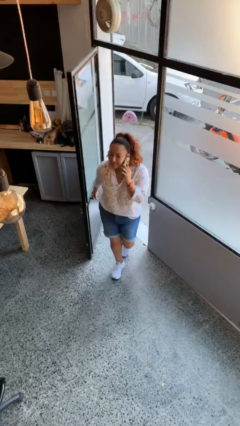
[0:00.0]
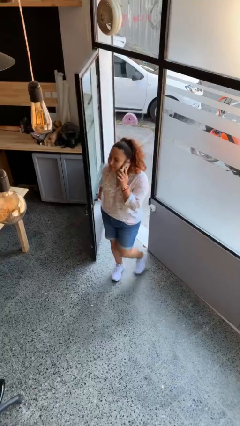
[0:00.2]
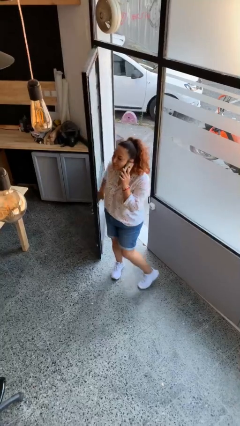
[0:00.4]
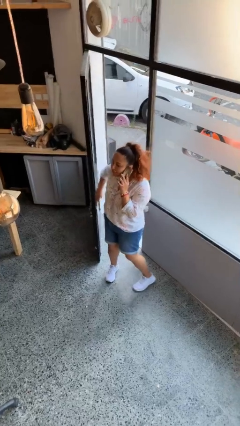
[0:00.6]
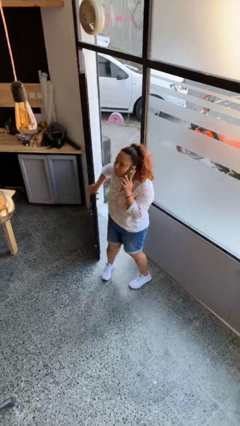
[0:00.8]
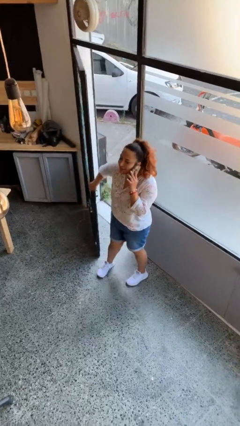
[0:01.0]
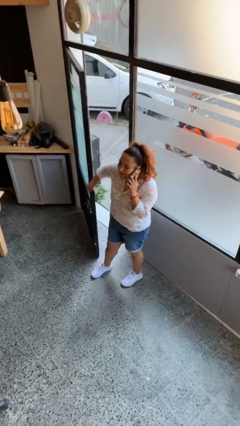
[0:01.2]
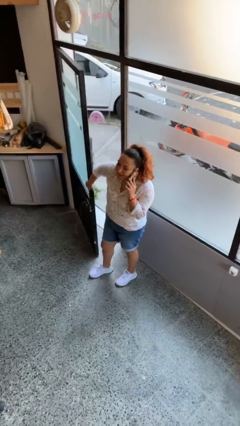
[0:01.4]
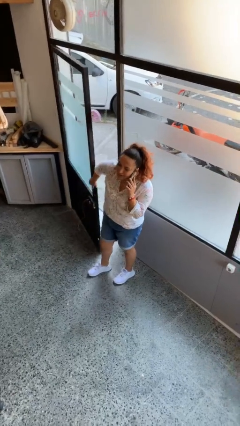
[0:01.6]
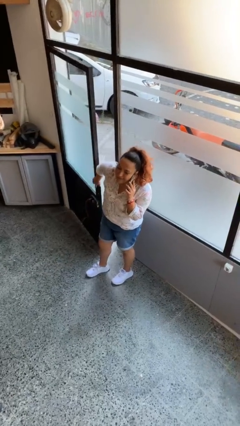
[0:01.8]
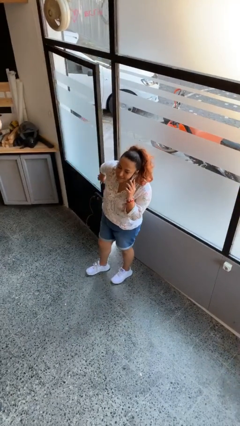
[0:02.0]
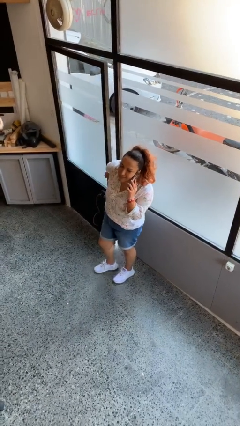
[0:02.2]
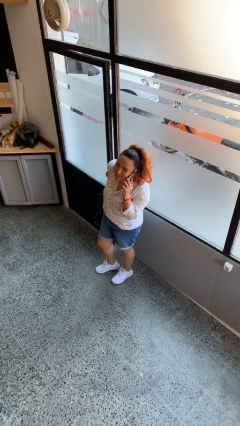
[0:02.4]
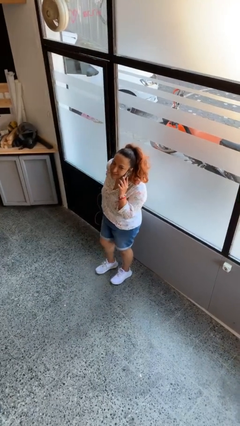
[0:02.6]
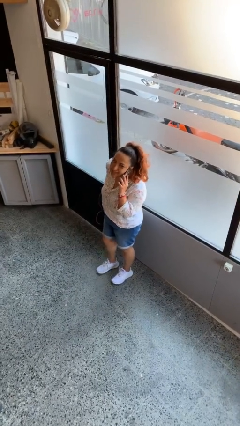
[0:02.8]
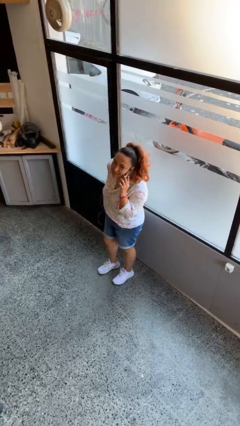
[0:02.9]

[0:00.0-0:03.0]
person closes facility door

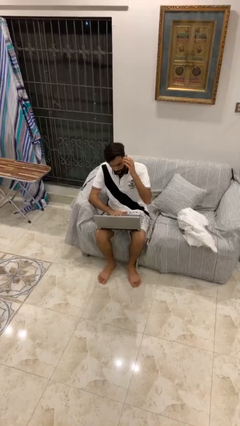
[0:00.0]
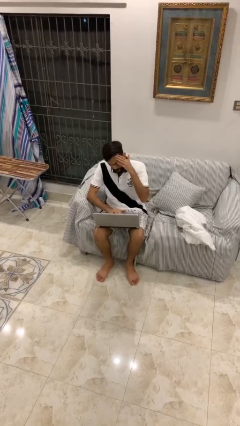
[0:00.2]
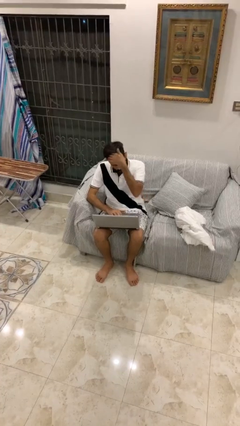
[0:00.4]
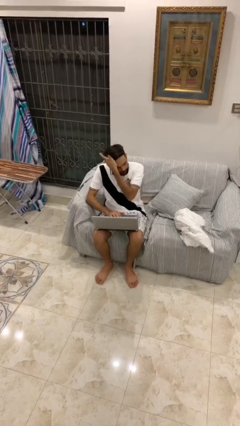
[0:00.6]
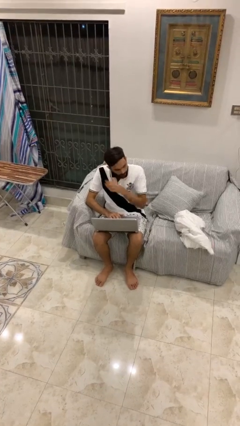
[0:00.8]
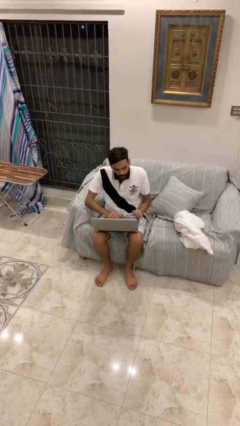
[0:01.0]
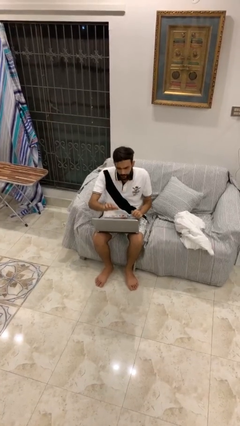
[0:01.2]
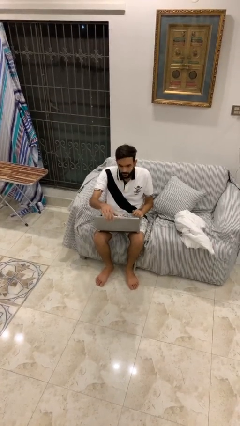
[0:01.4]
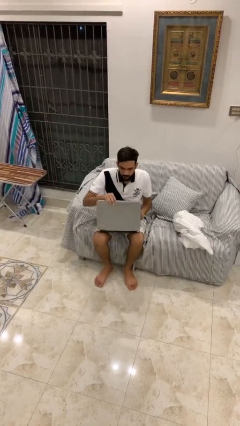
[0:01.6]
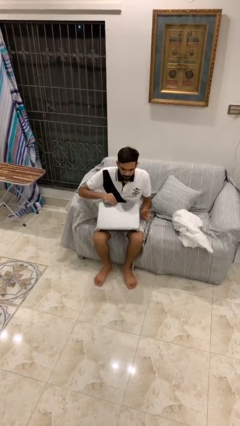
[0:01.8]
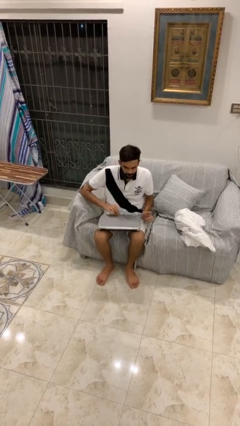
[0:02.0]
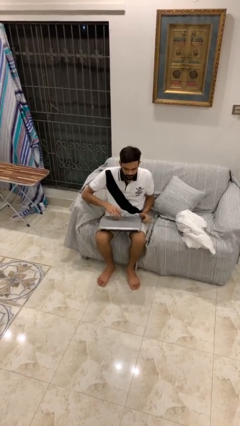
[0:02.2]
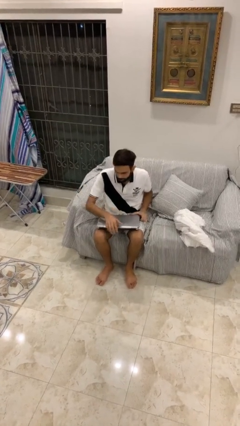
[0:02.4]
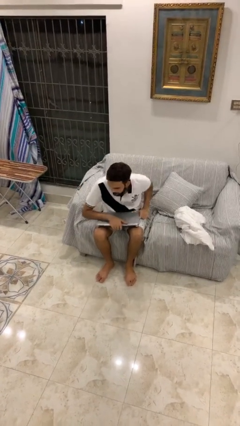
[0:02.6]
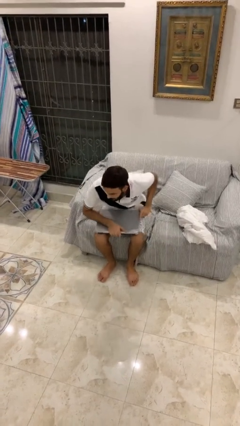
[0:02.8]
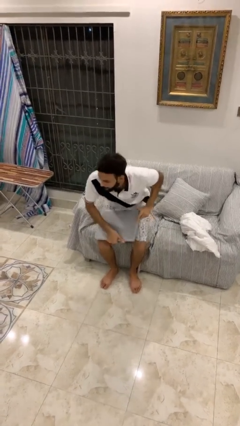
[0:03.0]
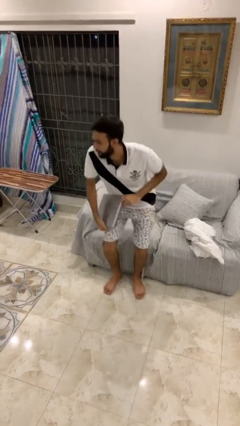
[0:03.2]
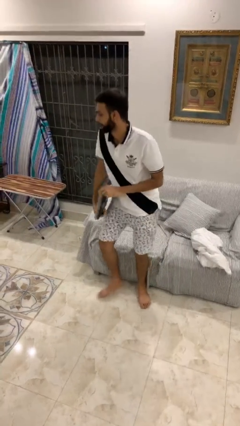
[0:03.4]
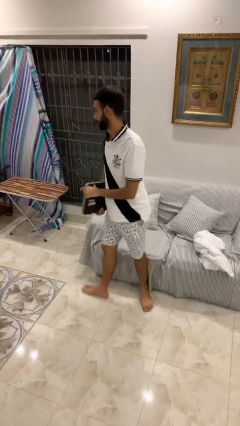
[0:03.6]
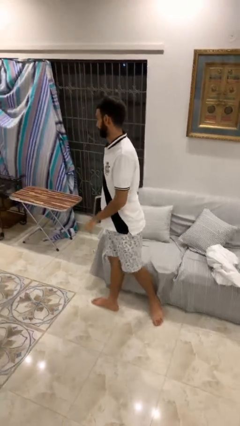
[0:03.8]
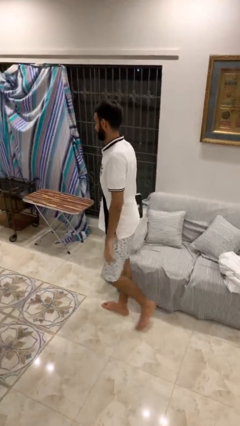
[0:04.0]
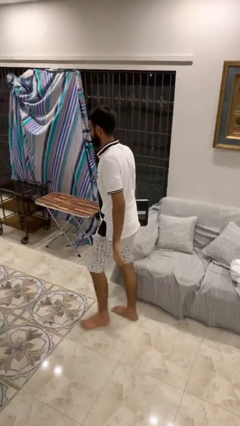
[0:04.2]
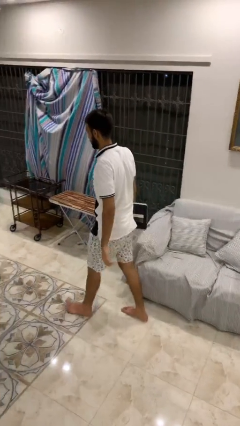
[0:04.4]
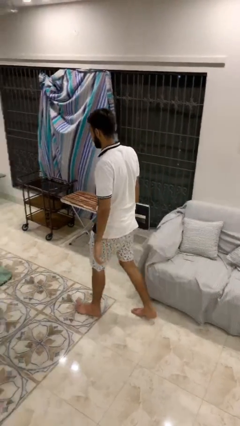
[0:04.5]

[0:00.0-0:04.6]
person stands up

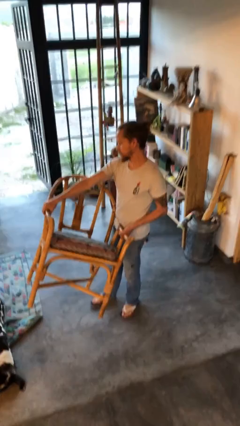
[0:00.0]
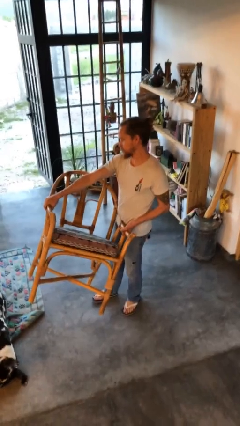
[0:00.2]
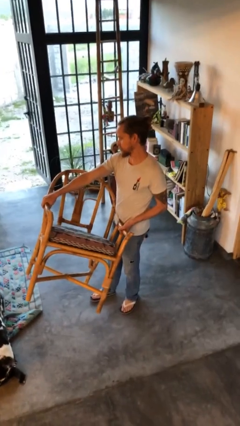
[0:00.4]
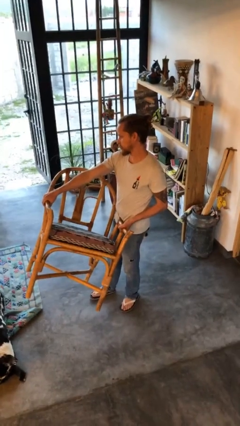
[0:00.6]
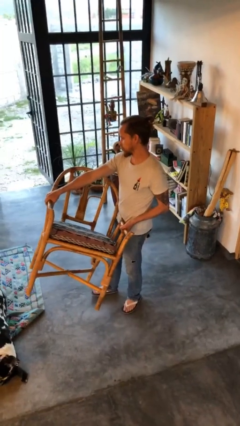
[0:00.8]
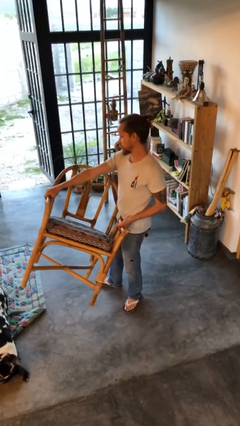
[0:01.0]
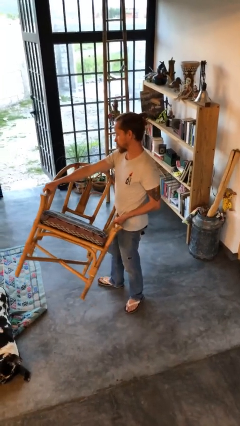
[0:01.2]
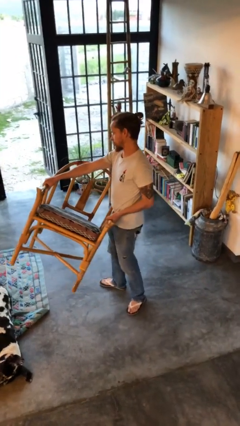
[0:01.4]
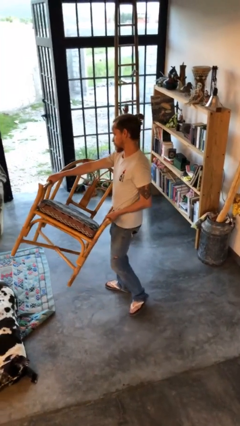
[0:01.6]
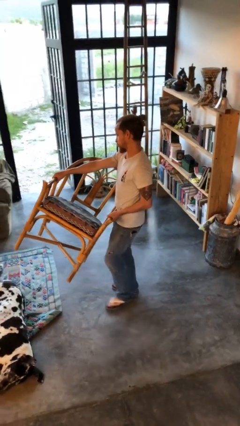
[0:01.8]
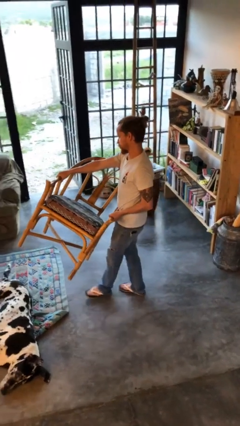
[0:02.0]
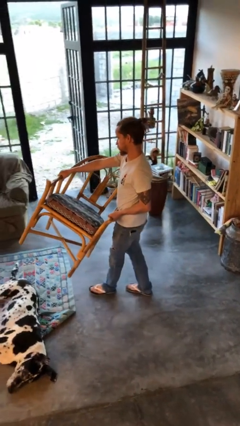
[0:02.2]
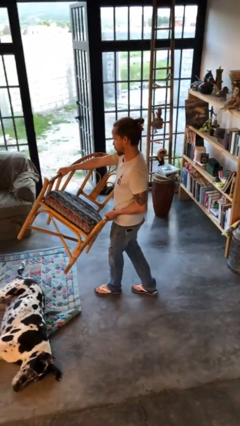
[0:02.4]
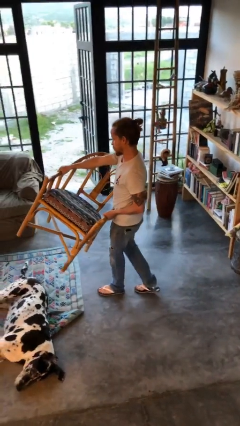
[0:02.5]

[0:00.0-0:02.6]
person carries furniture

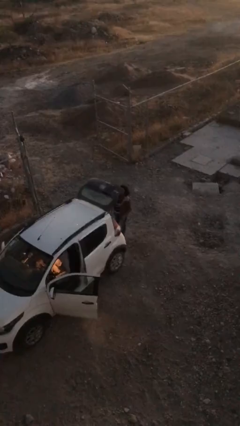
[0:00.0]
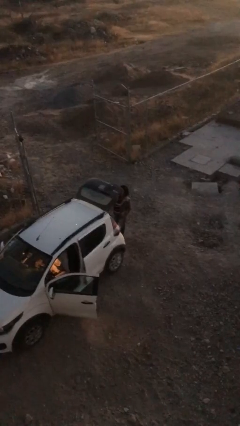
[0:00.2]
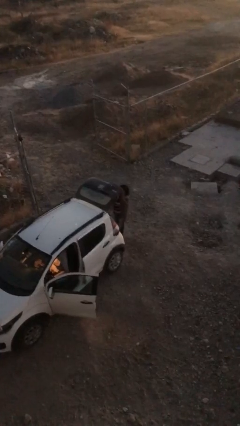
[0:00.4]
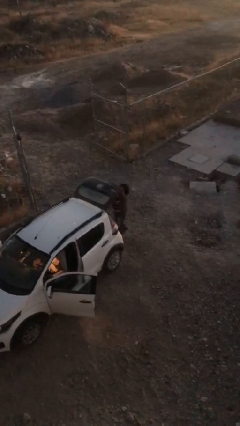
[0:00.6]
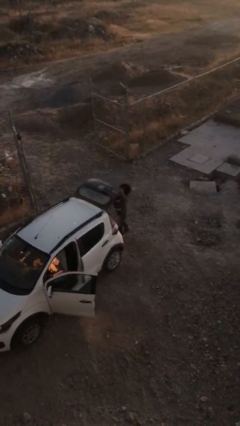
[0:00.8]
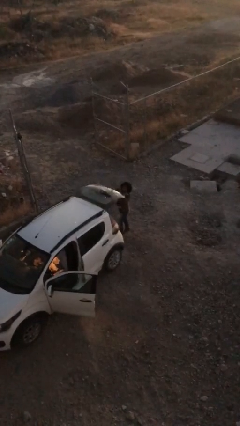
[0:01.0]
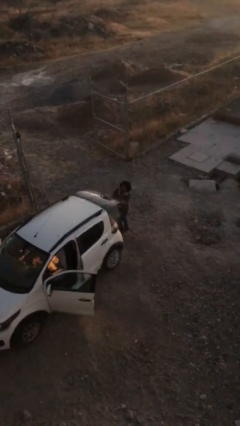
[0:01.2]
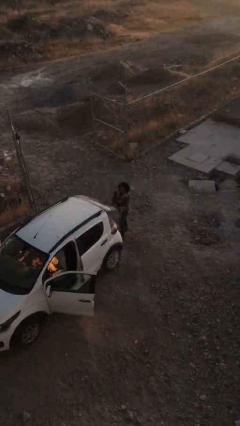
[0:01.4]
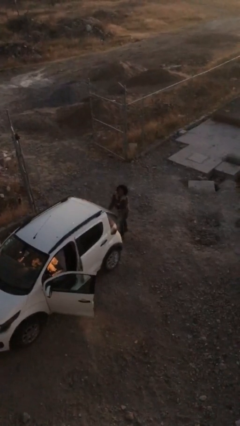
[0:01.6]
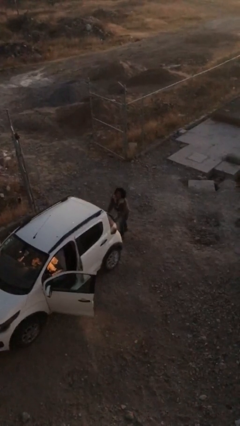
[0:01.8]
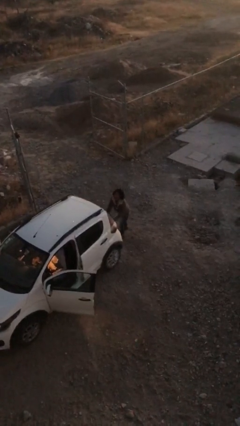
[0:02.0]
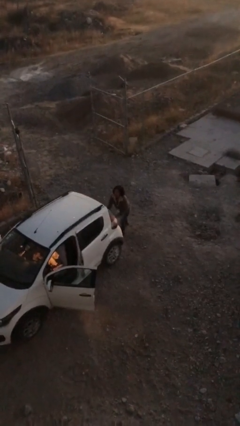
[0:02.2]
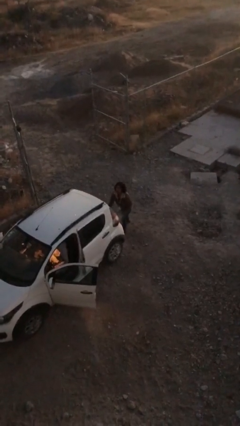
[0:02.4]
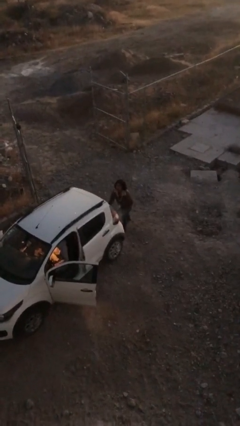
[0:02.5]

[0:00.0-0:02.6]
person closes car trunk

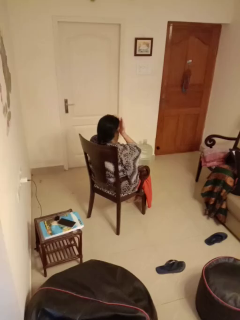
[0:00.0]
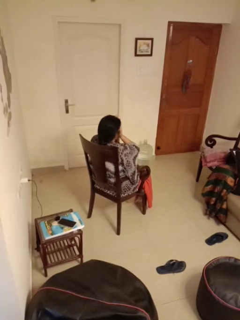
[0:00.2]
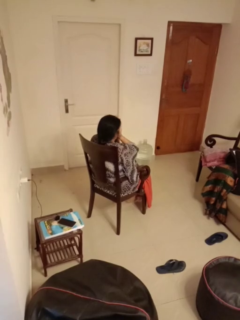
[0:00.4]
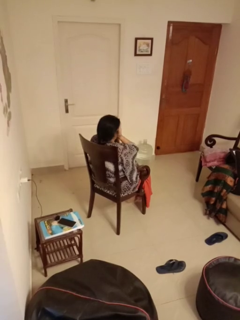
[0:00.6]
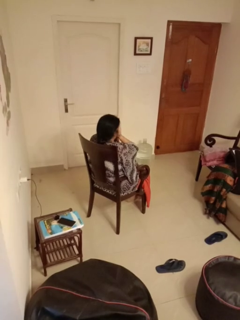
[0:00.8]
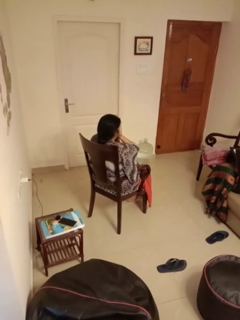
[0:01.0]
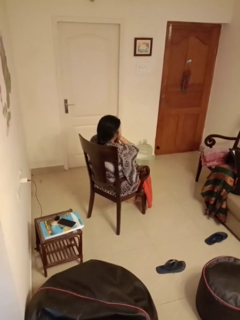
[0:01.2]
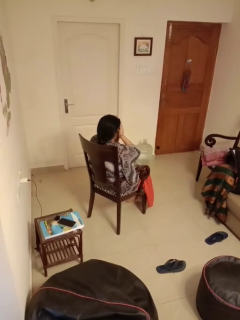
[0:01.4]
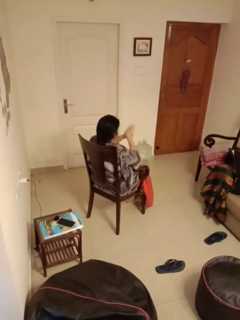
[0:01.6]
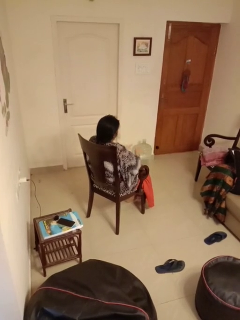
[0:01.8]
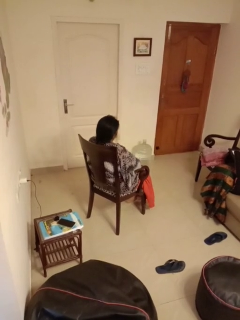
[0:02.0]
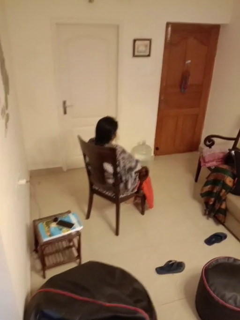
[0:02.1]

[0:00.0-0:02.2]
person covers face with hands

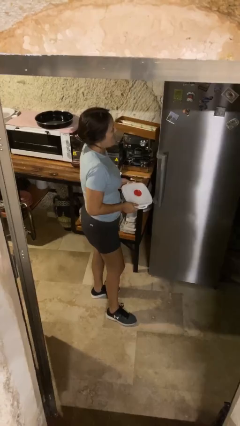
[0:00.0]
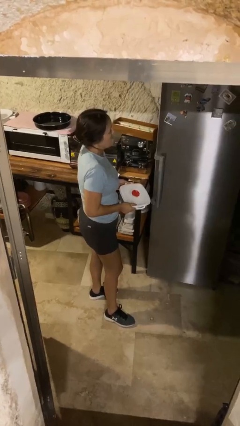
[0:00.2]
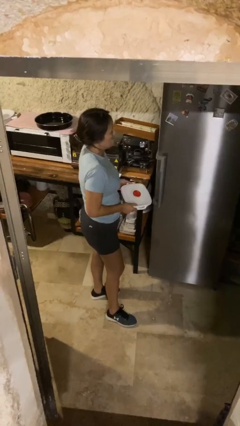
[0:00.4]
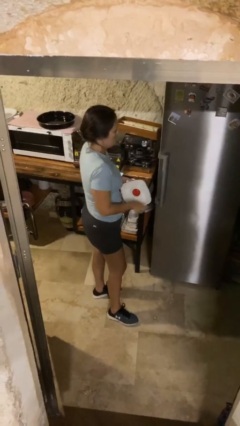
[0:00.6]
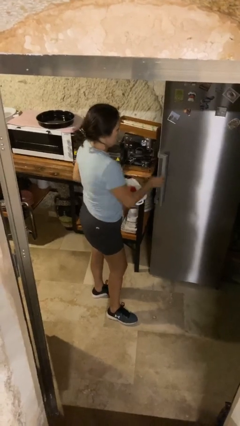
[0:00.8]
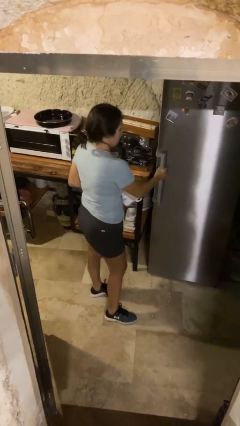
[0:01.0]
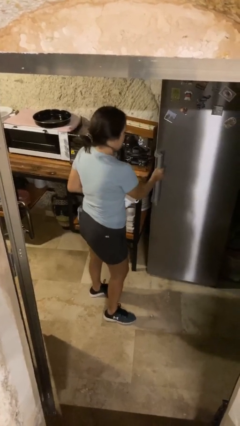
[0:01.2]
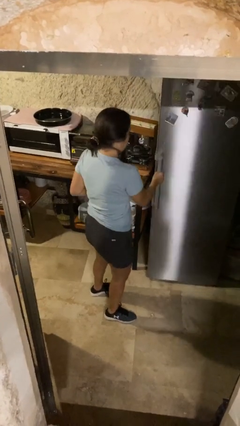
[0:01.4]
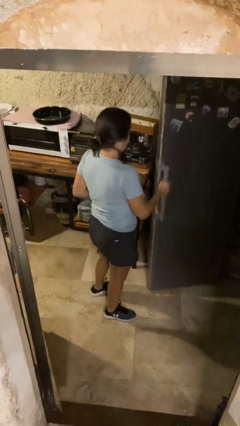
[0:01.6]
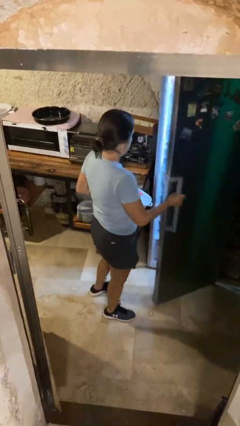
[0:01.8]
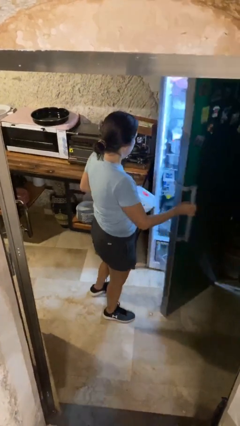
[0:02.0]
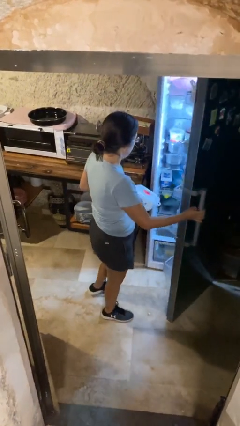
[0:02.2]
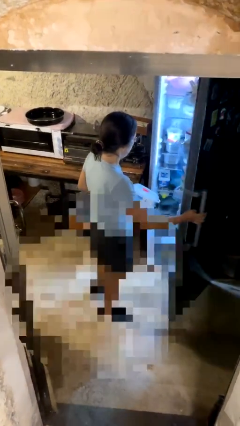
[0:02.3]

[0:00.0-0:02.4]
person opens refrigerator

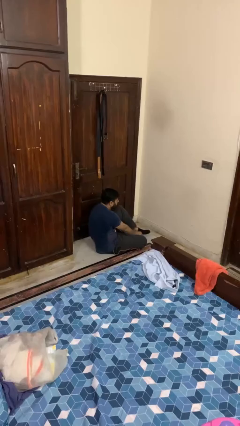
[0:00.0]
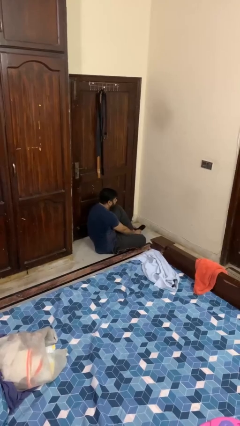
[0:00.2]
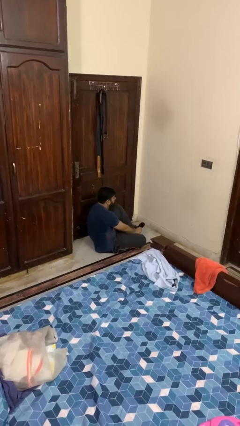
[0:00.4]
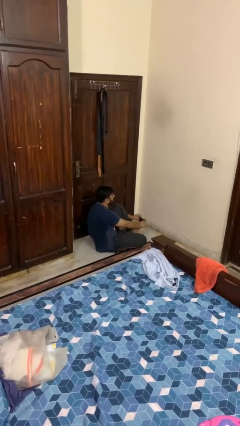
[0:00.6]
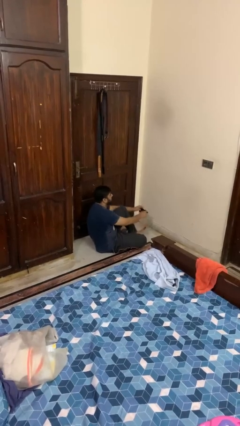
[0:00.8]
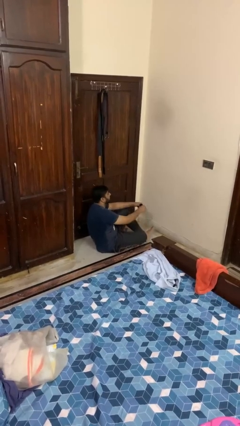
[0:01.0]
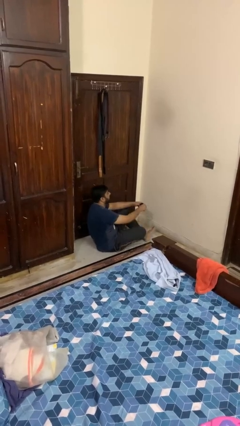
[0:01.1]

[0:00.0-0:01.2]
person takes off socks
